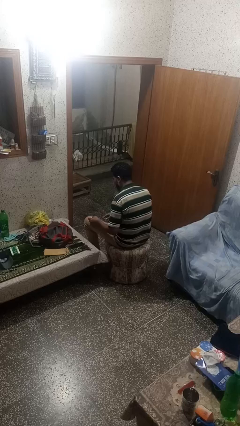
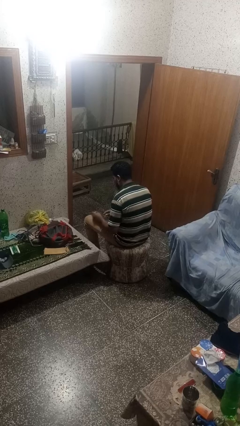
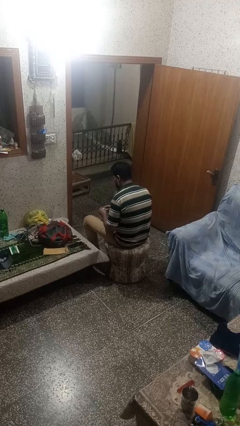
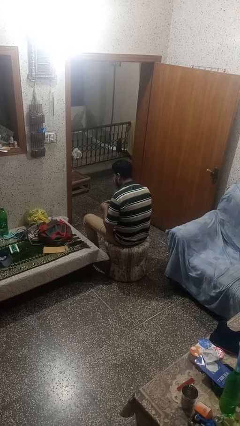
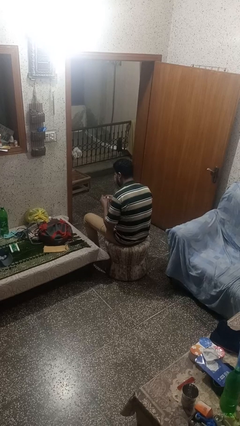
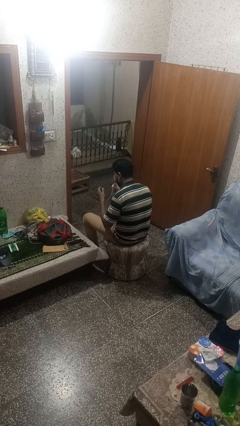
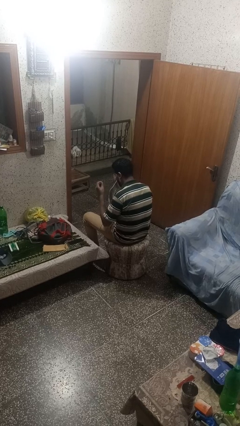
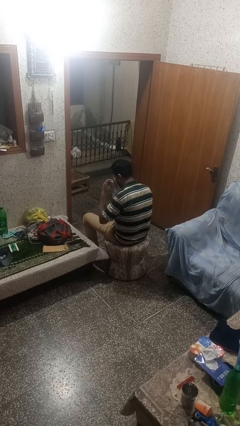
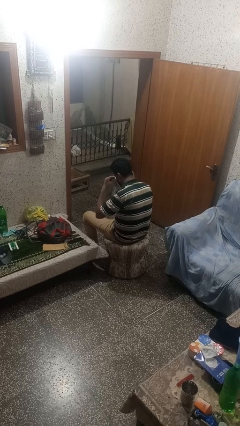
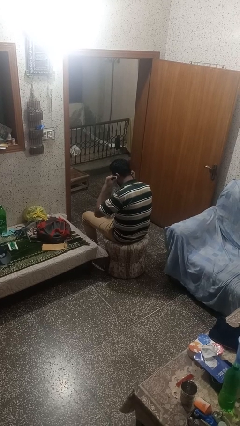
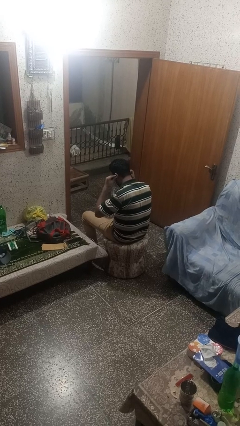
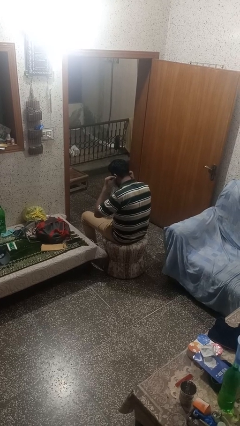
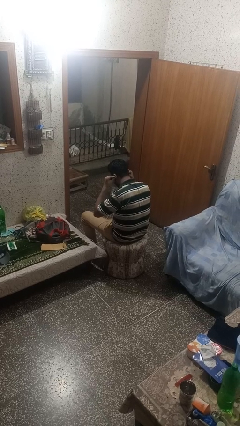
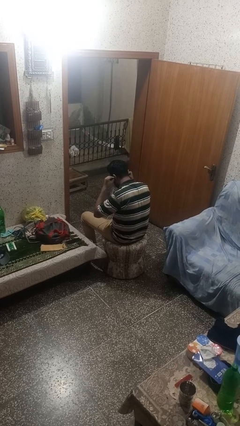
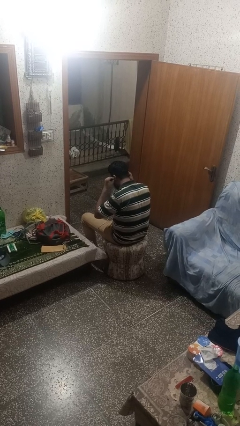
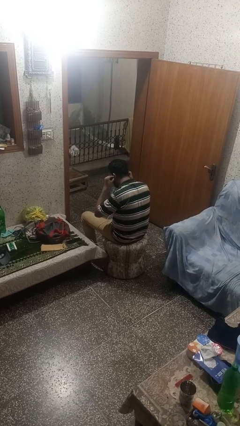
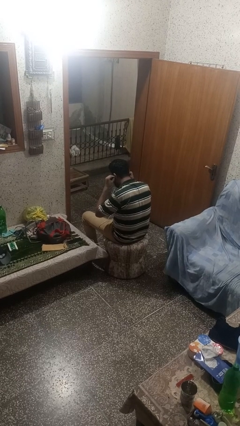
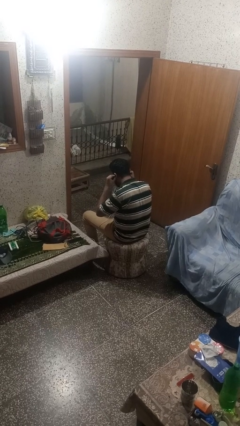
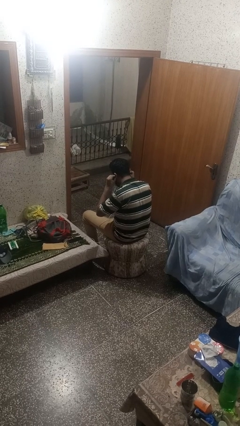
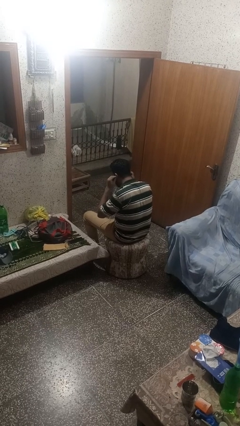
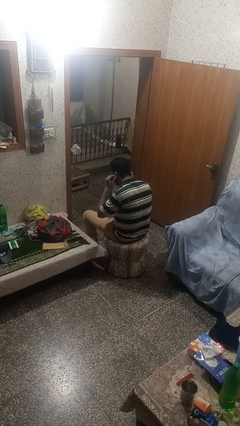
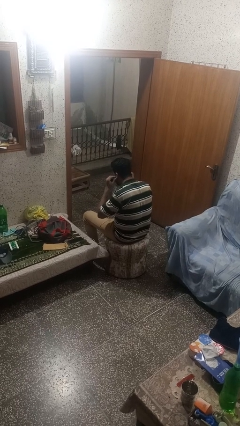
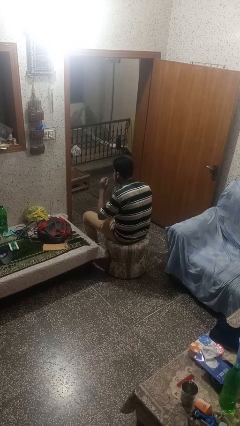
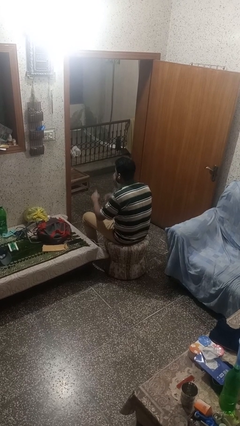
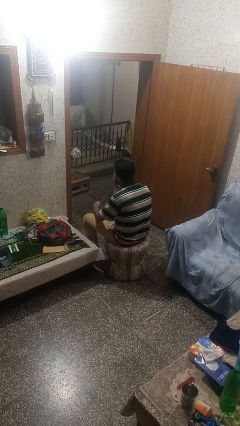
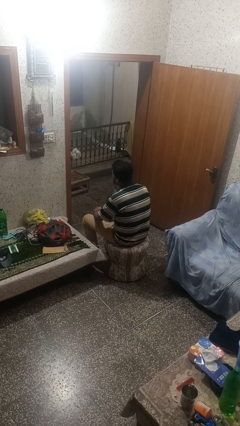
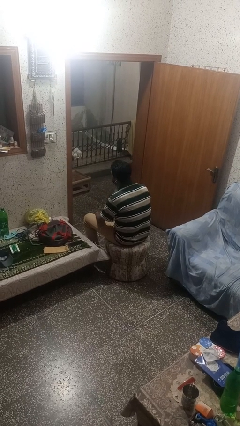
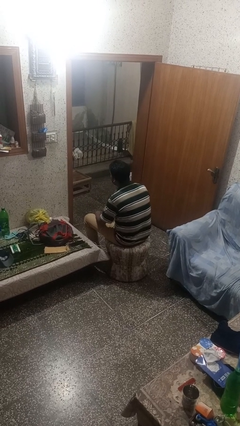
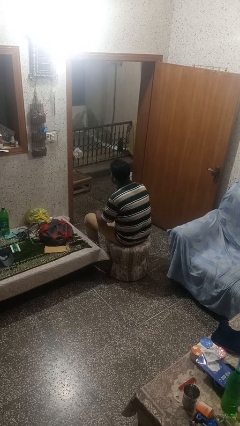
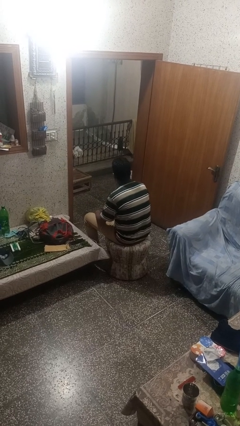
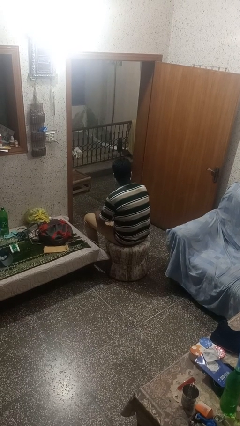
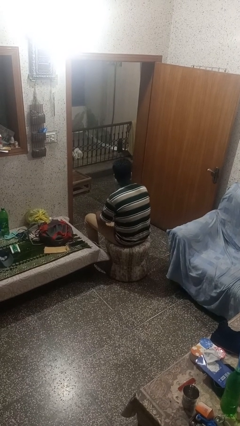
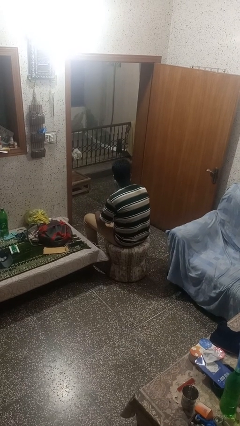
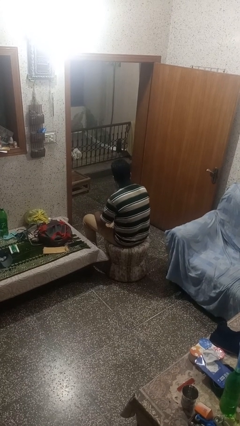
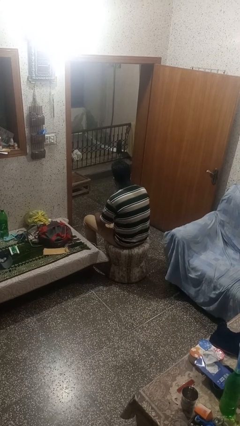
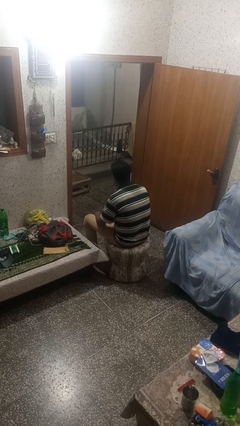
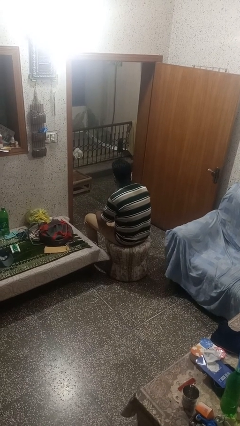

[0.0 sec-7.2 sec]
person puts on headphones

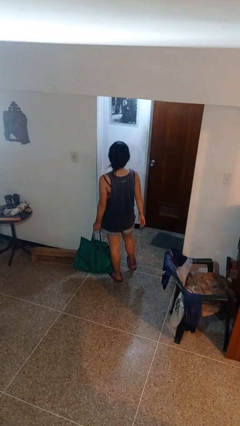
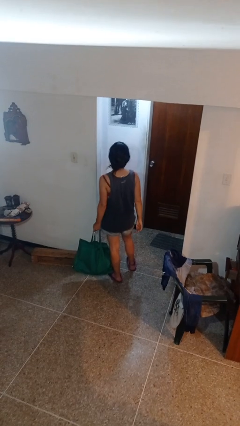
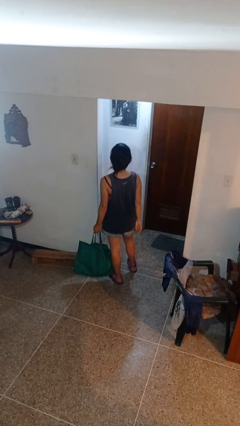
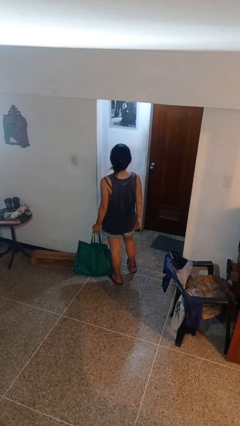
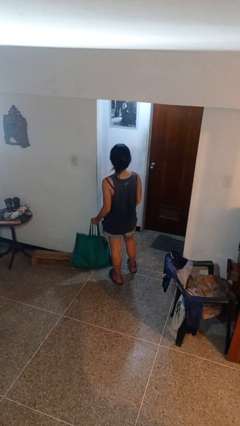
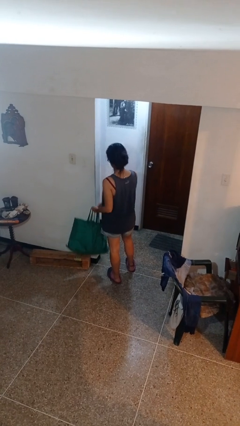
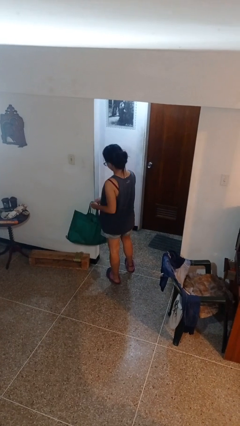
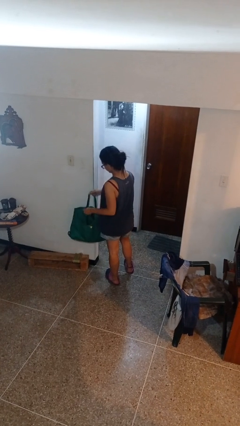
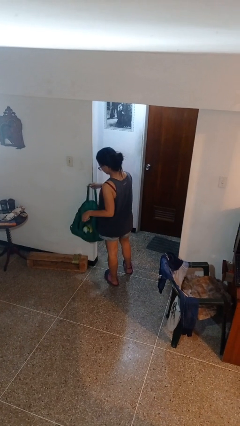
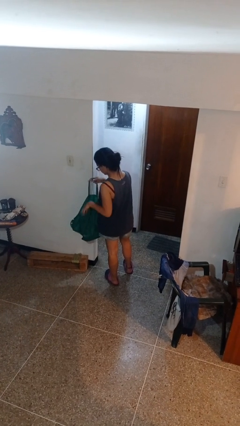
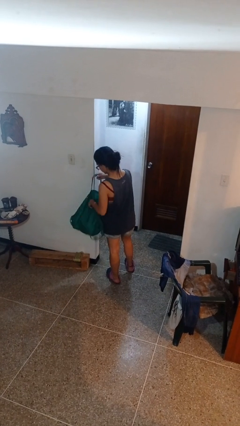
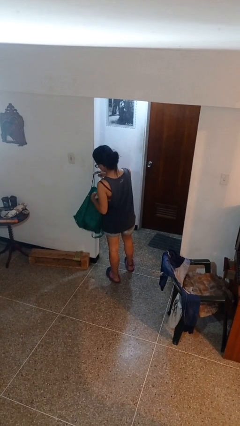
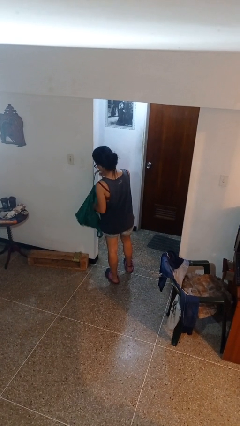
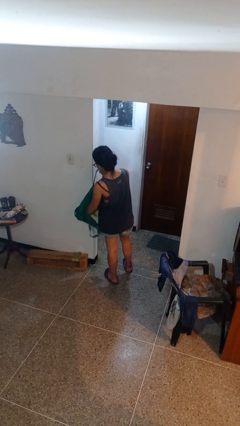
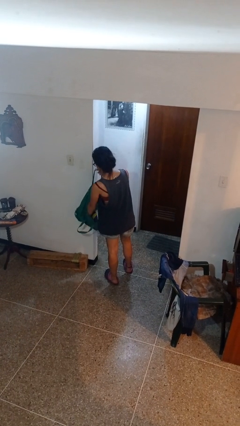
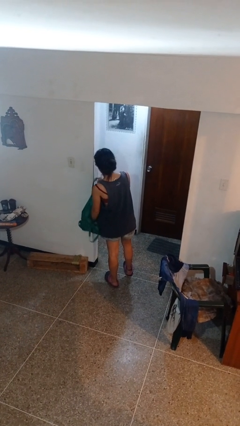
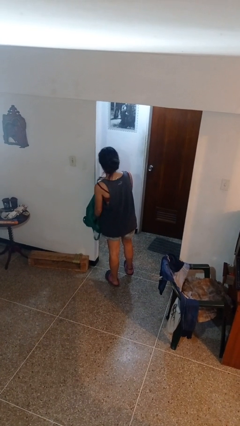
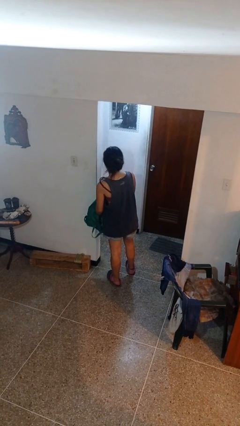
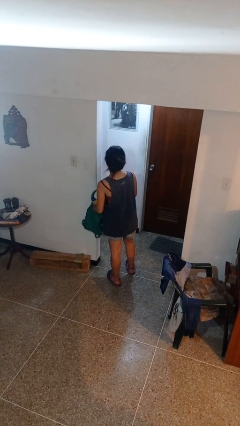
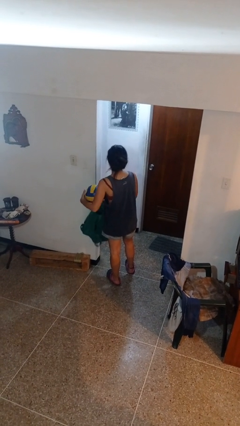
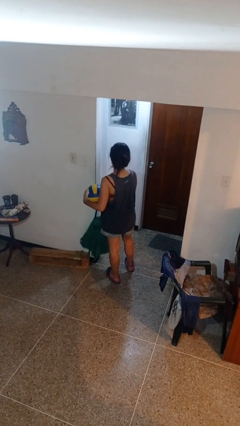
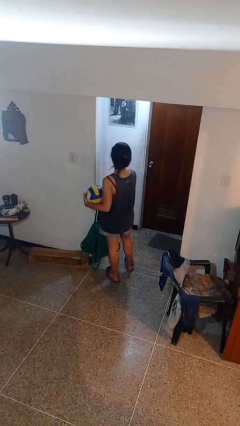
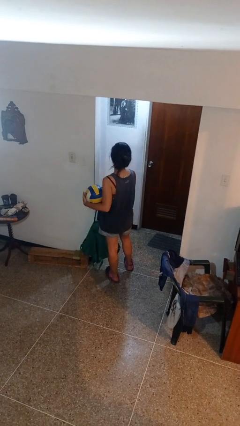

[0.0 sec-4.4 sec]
person takes object from bag

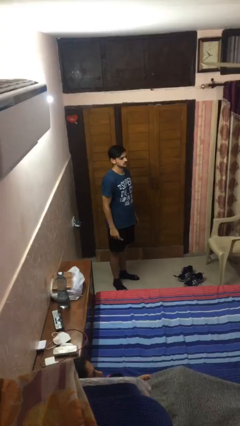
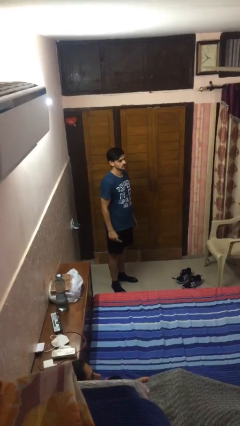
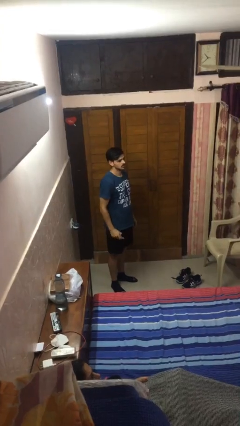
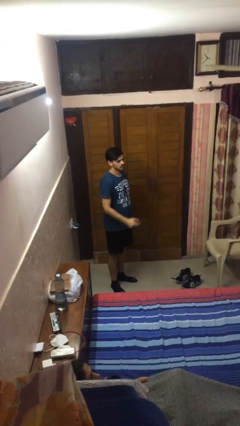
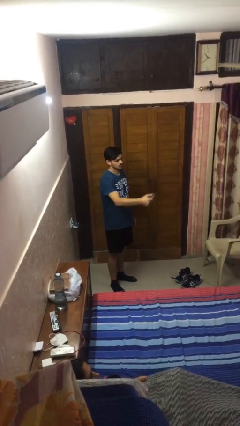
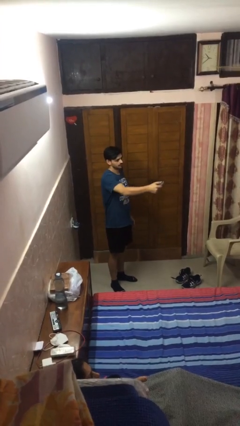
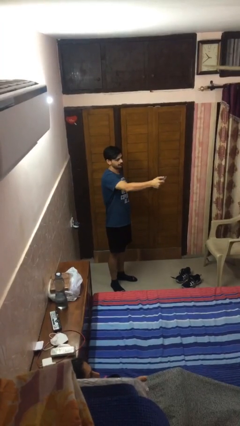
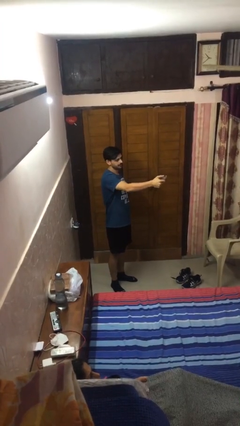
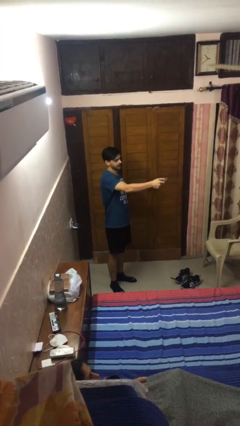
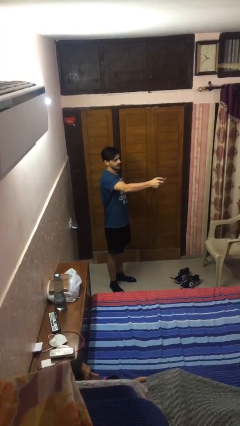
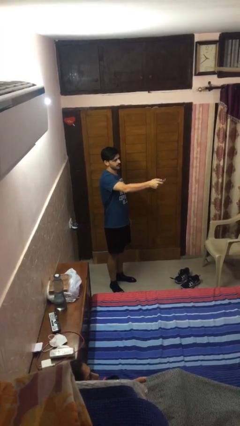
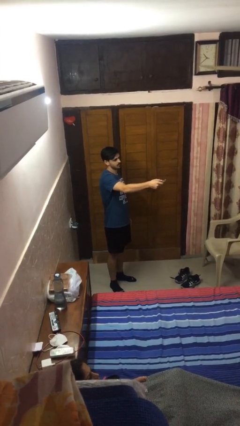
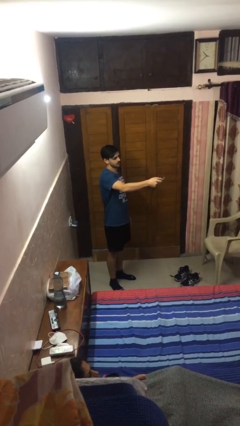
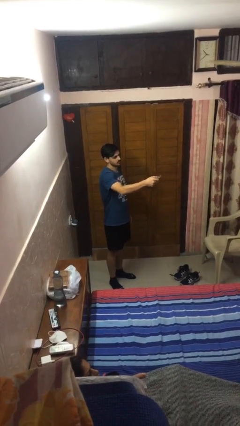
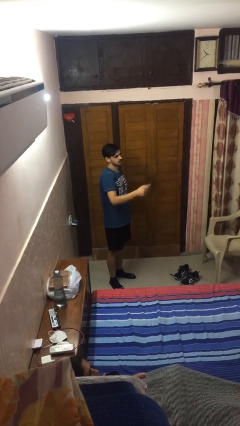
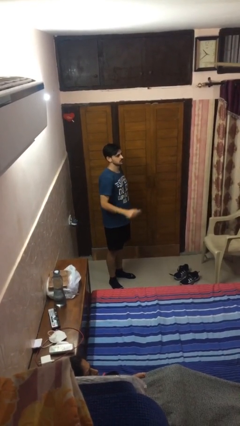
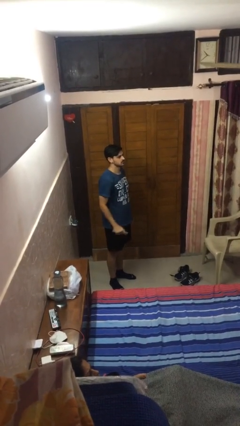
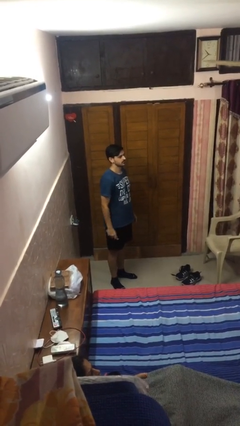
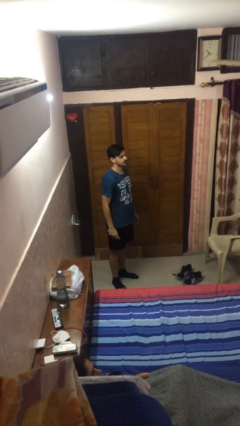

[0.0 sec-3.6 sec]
person uses television remote

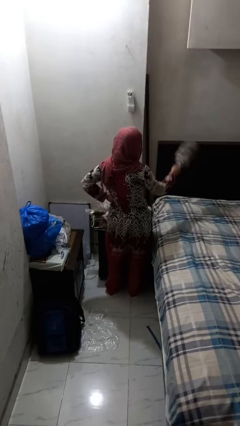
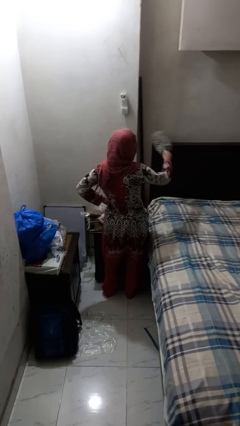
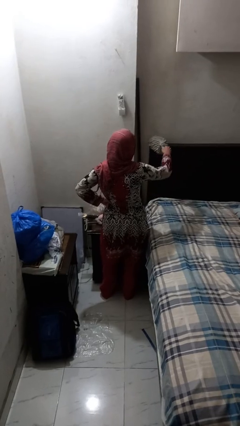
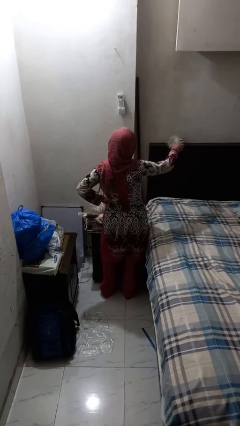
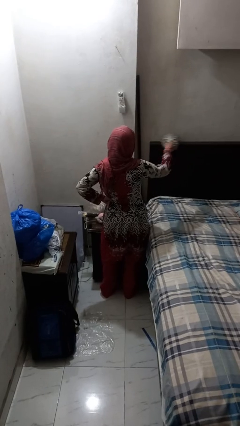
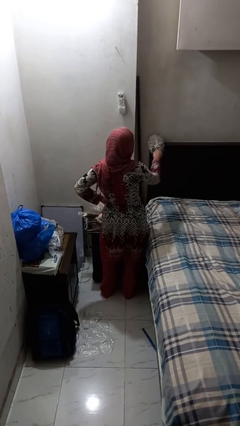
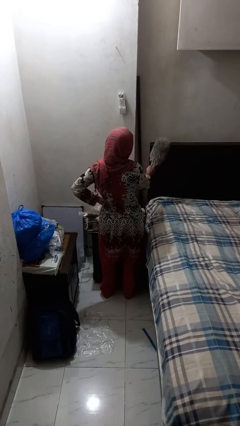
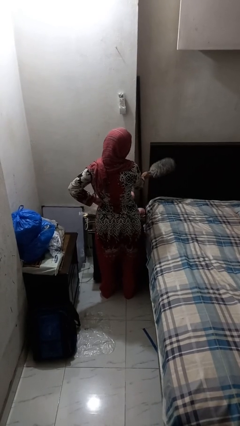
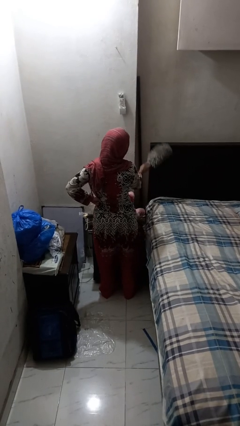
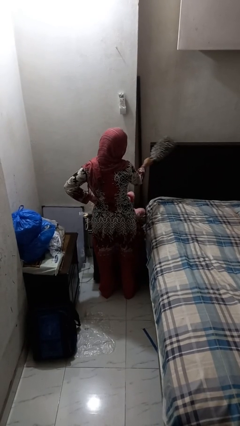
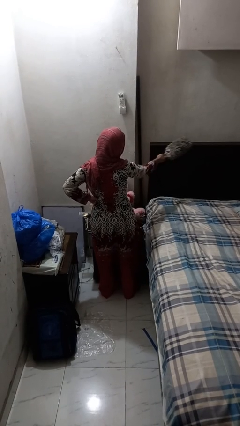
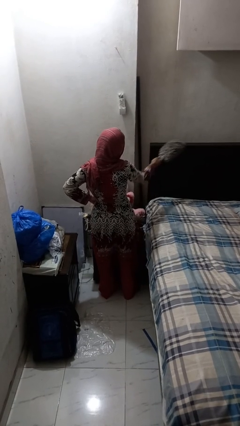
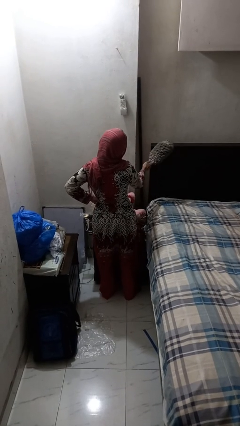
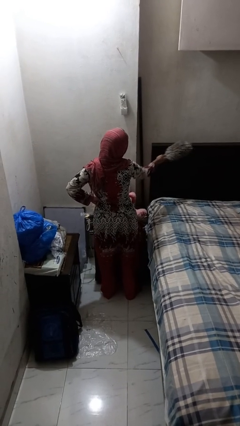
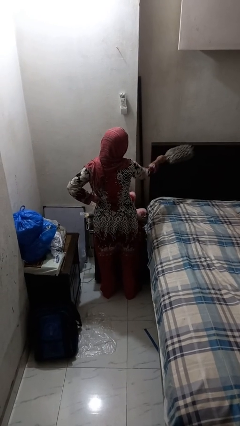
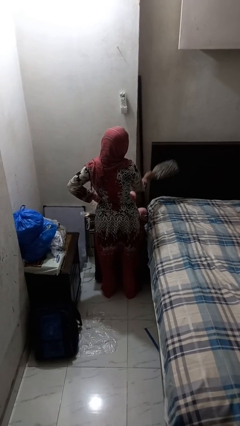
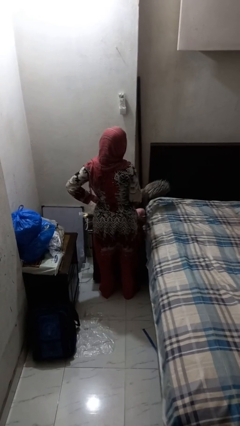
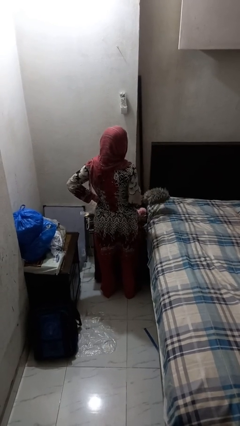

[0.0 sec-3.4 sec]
person dusts furniture
